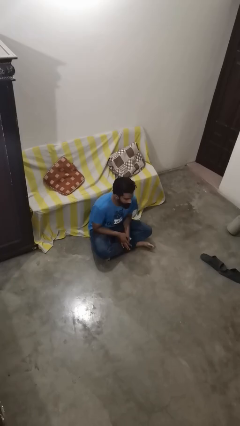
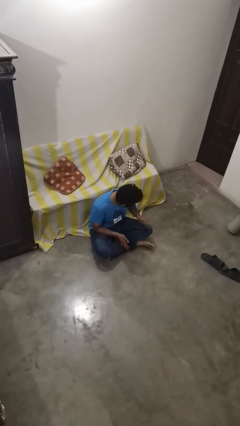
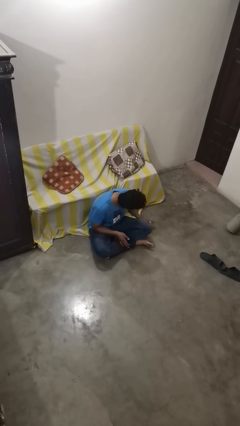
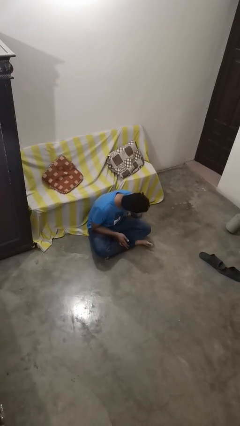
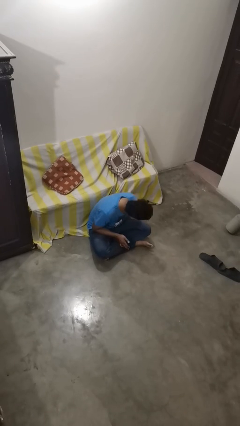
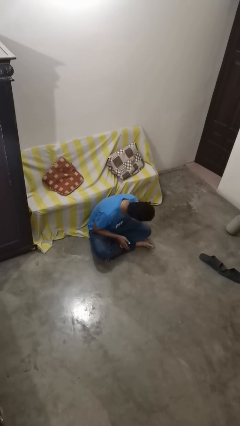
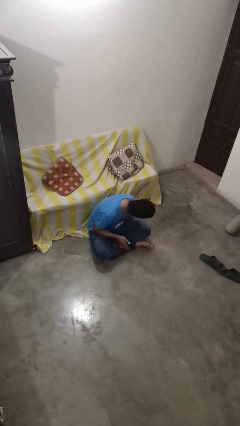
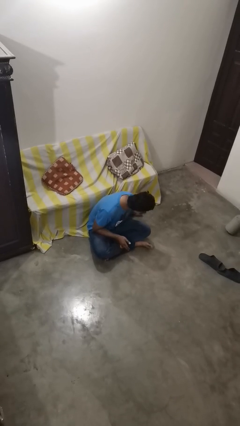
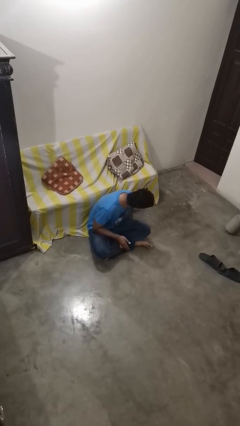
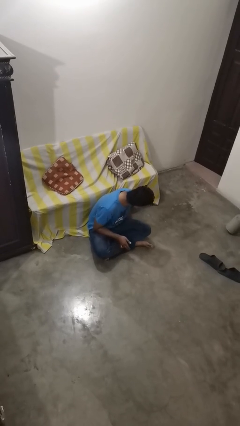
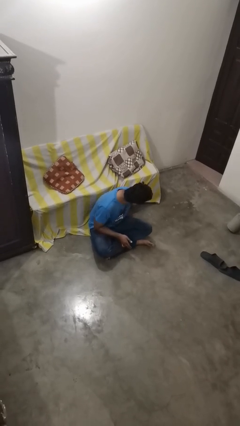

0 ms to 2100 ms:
person searches under couch

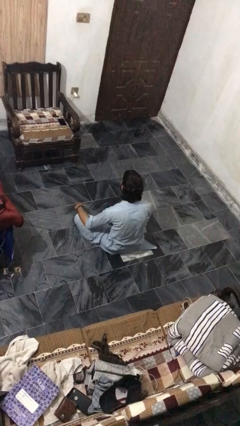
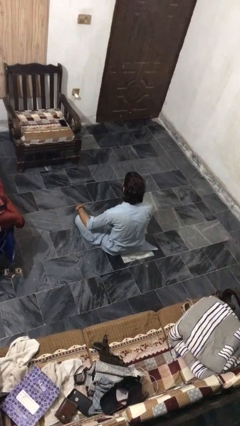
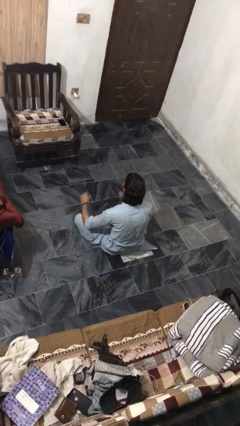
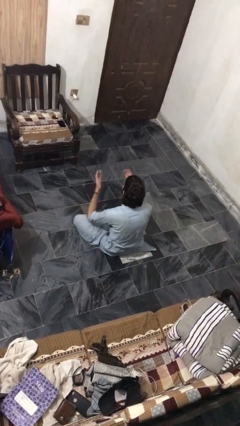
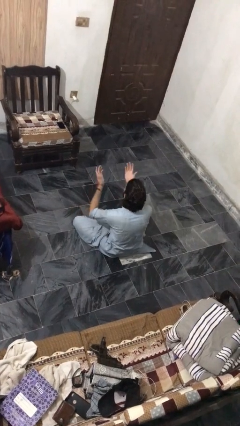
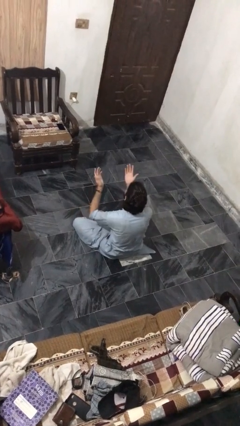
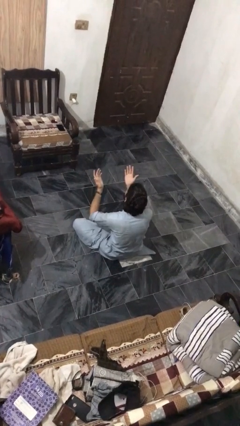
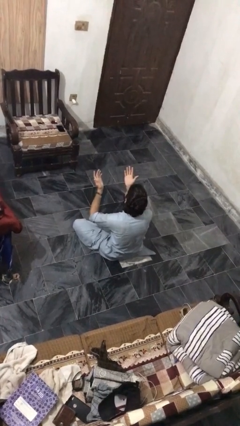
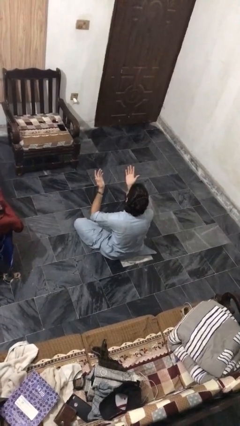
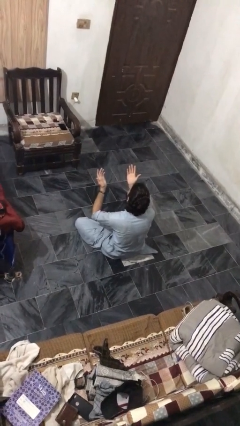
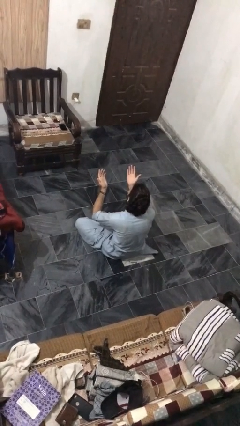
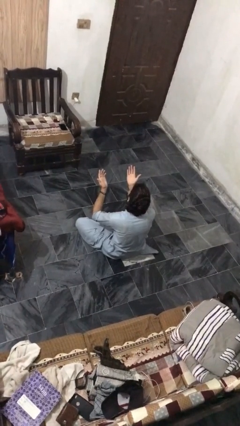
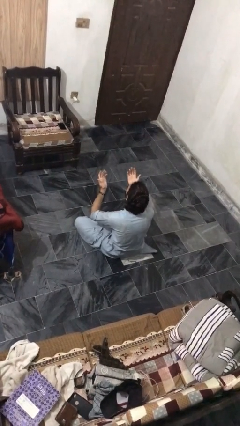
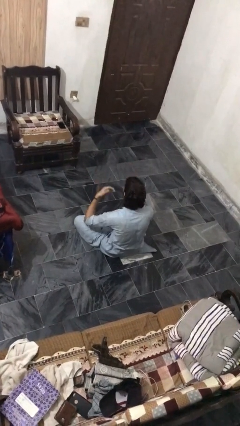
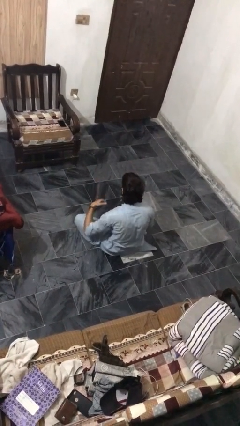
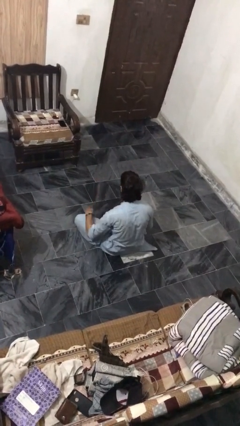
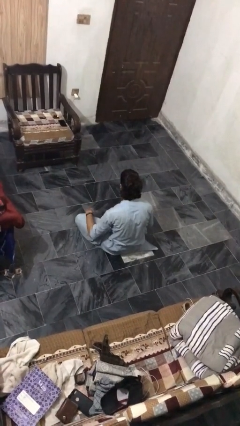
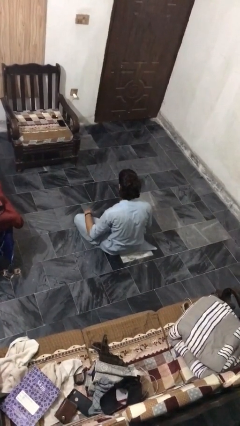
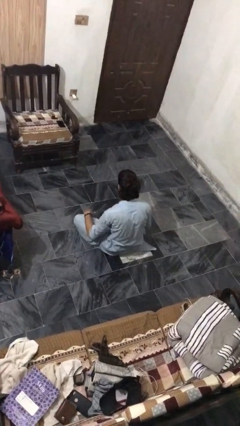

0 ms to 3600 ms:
person prays

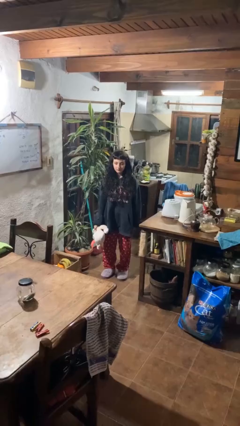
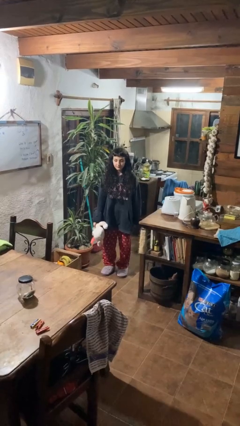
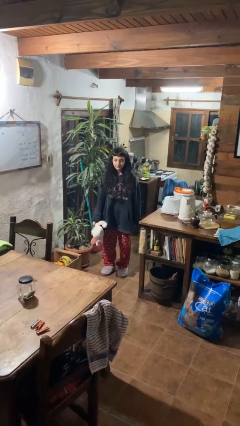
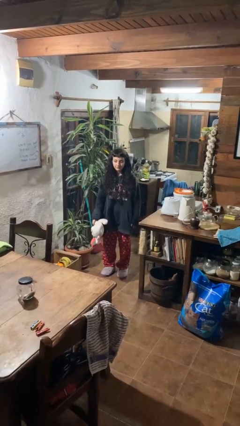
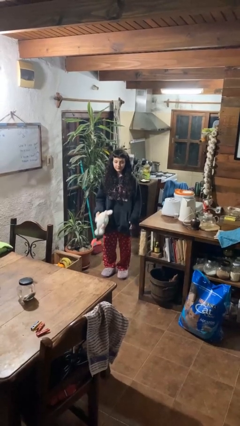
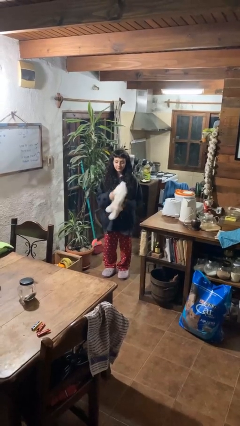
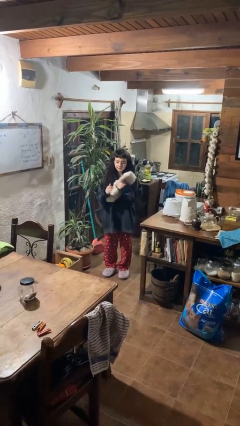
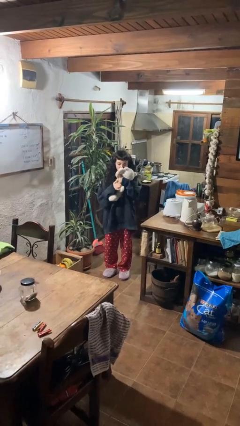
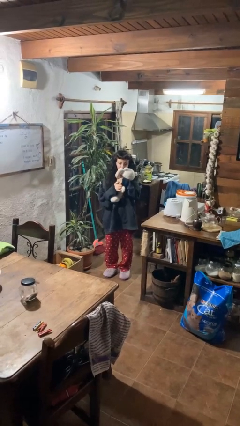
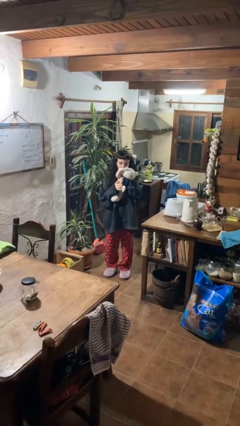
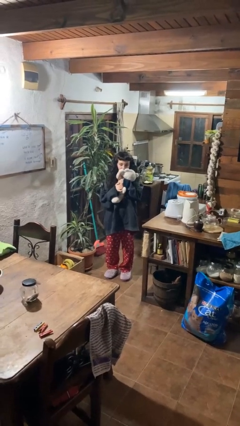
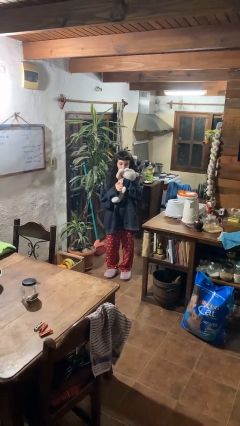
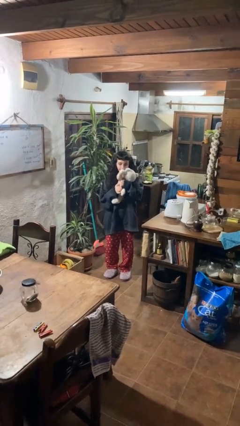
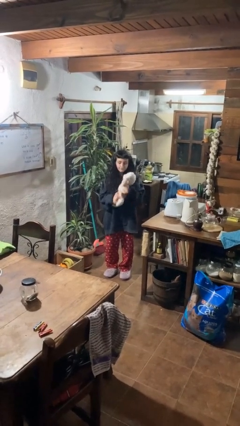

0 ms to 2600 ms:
person hugs stuffed animal

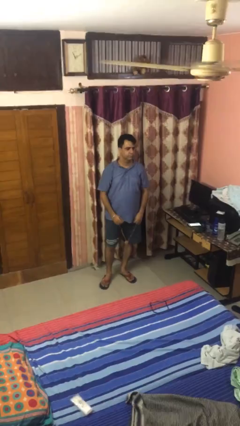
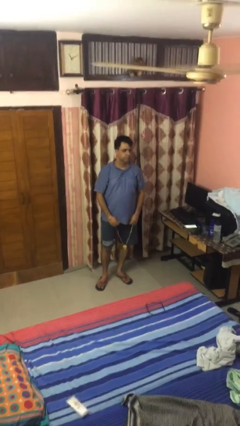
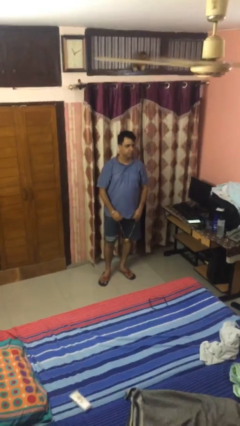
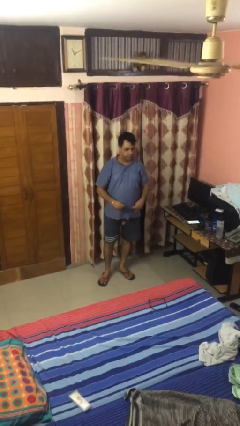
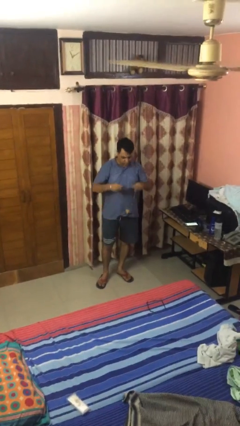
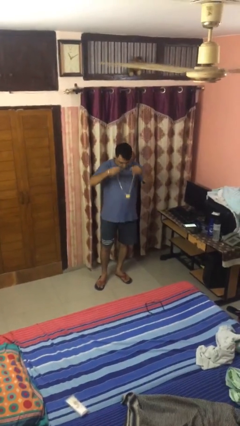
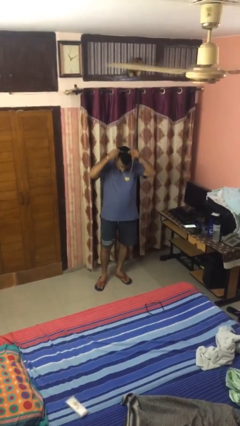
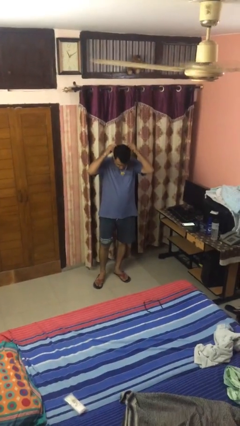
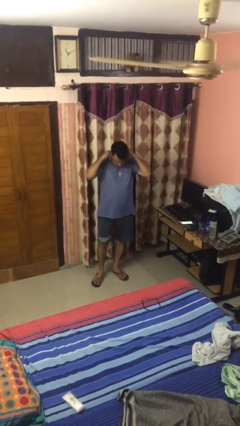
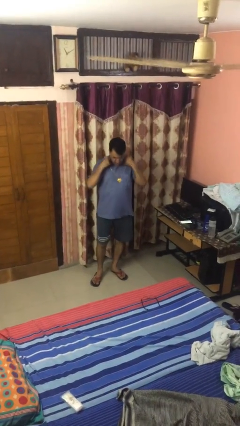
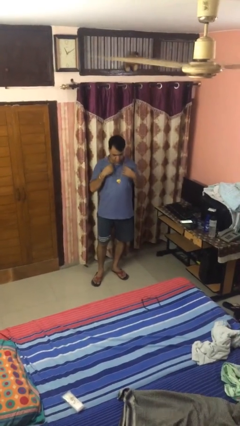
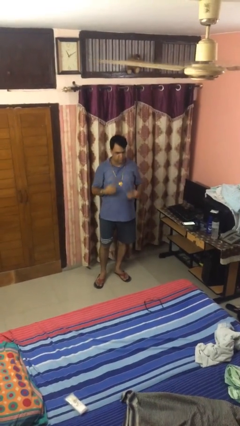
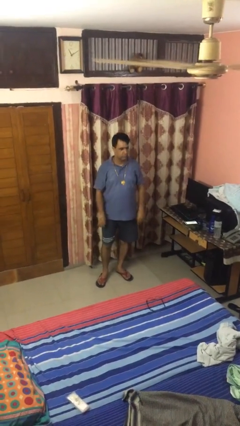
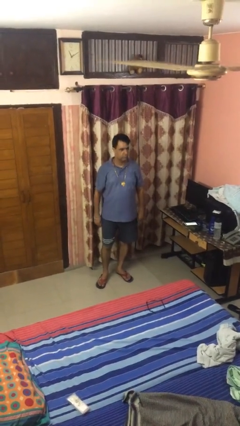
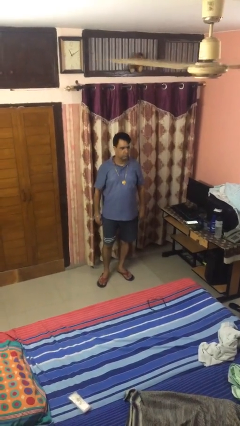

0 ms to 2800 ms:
person puts on necklace

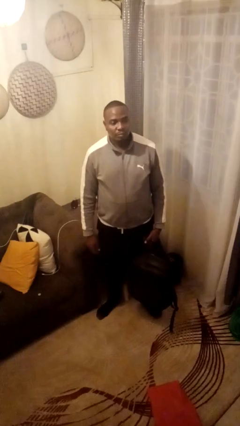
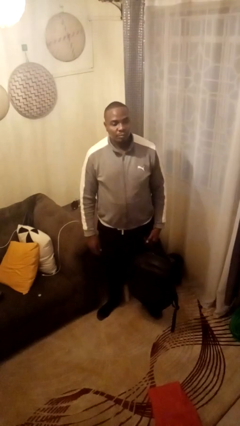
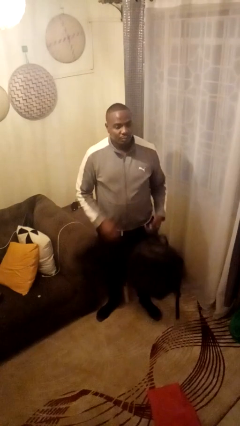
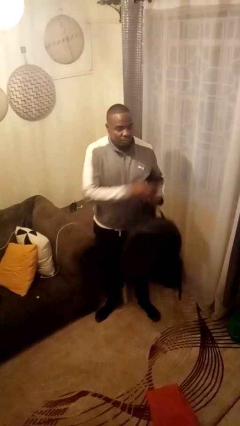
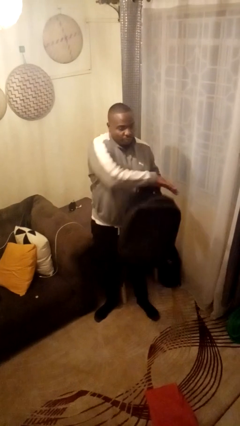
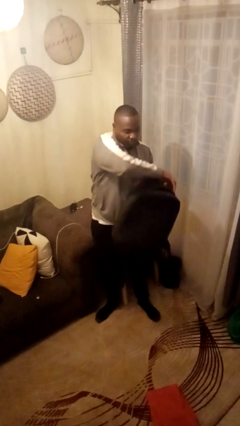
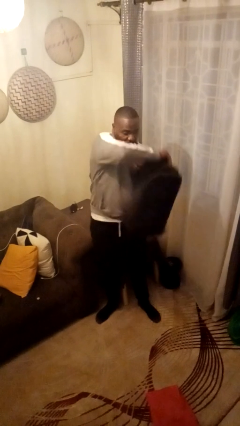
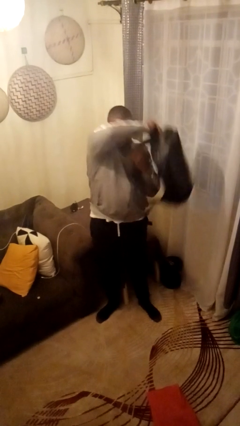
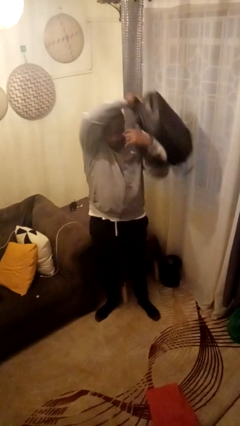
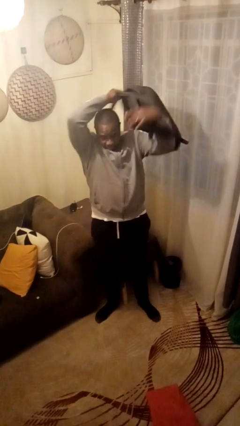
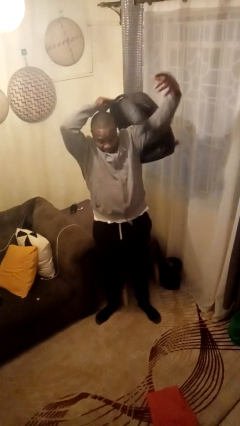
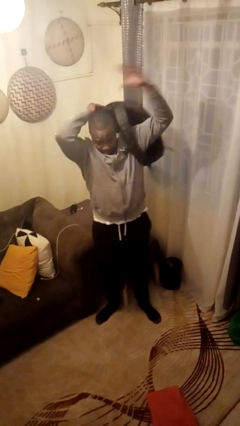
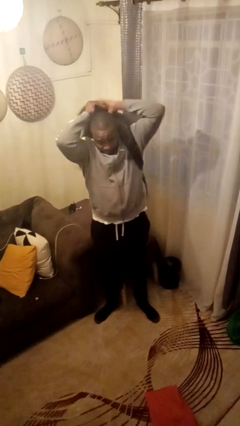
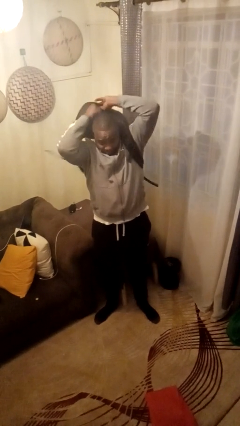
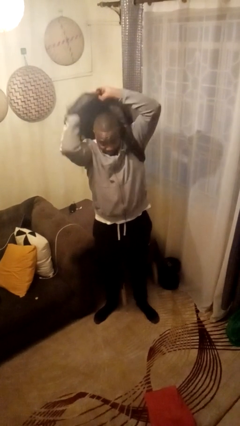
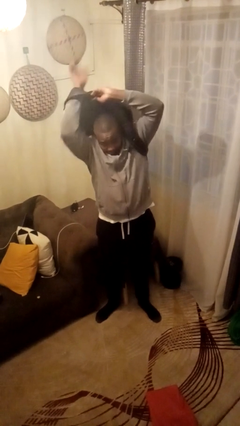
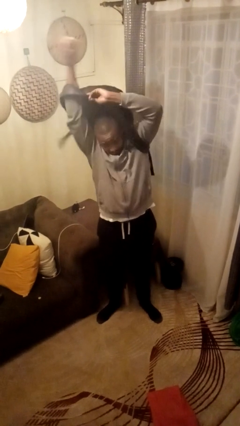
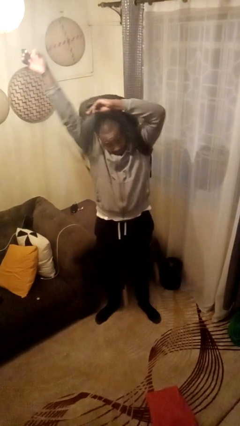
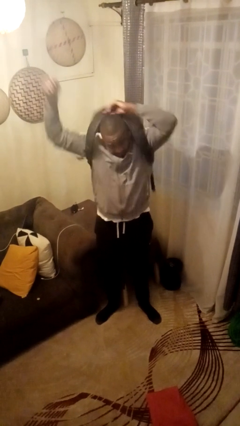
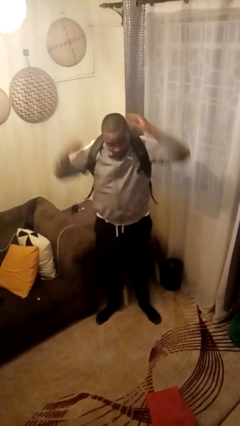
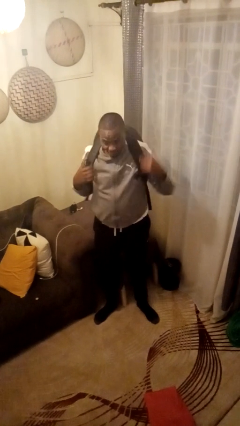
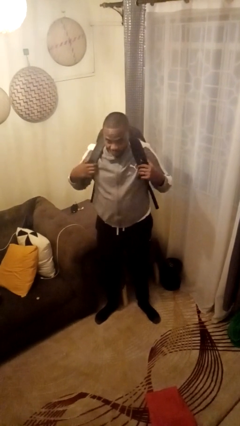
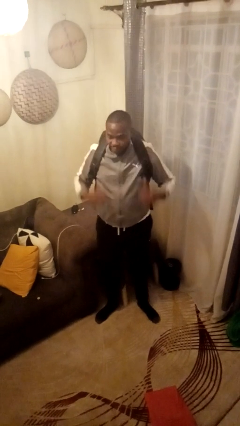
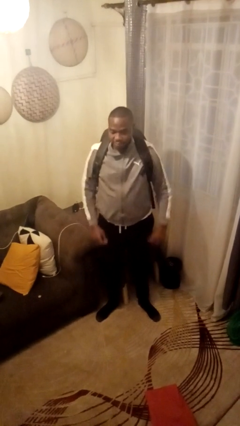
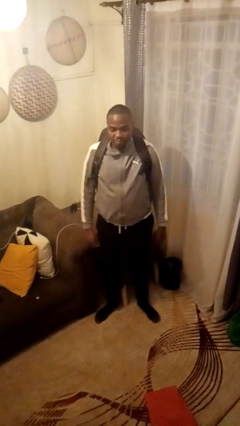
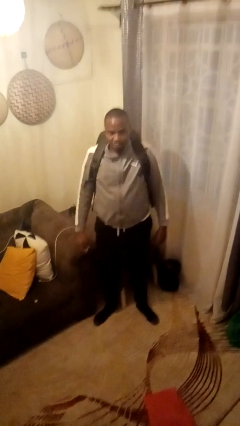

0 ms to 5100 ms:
person puts on backpack

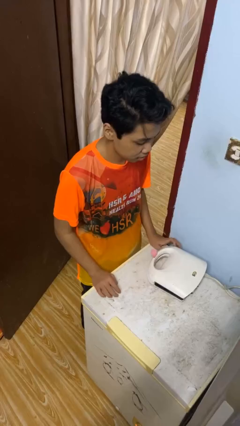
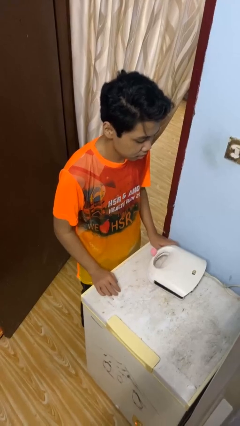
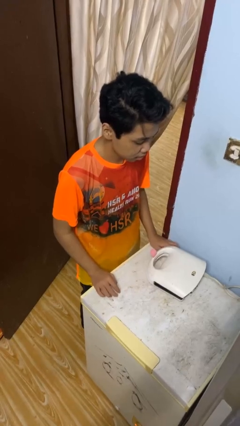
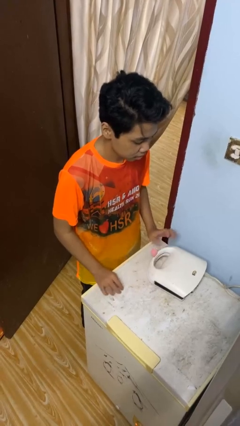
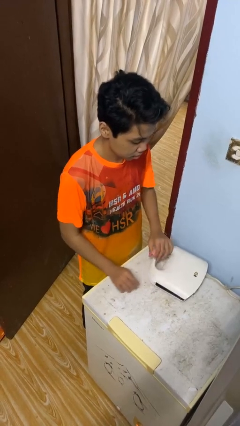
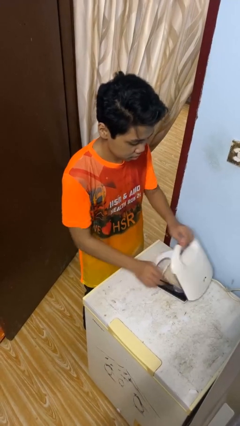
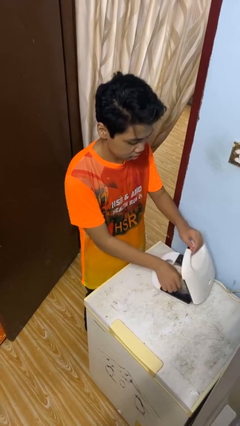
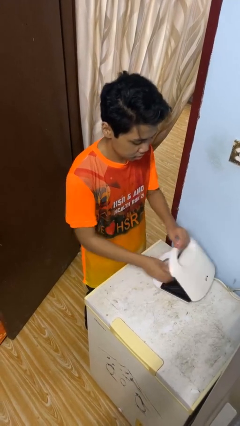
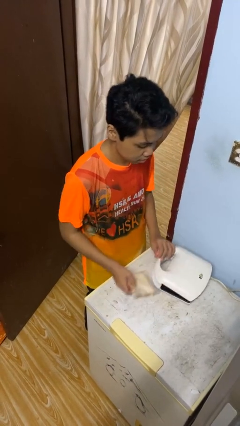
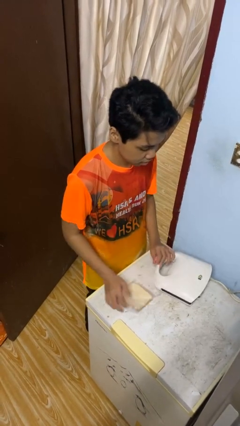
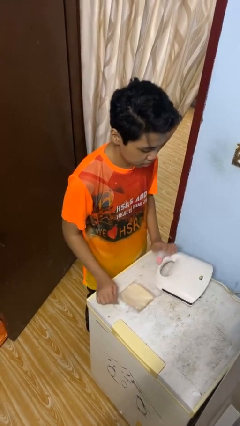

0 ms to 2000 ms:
person takes object from toaster
